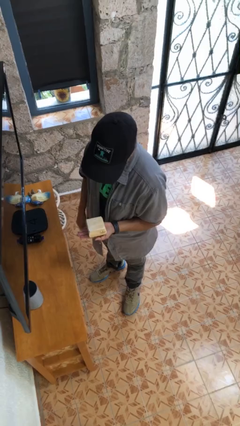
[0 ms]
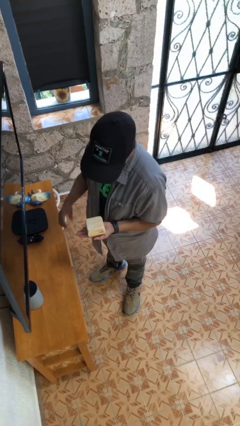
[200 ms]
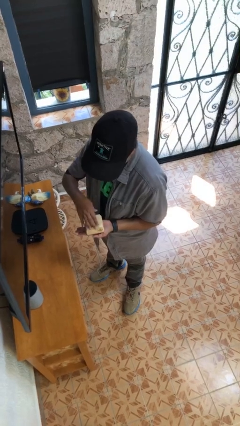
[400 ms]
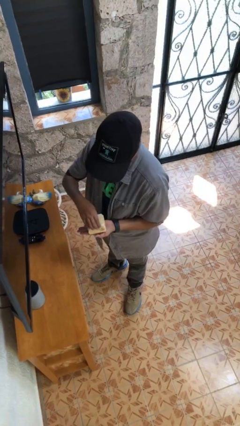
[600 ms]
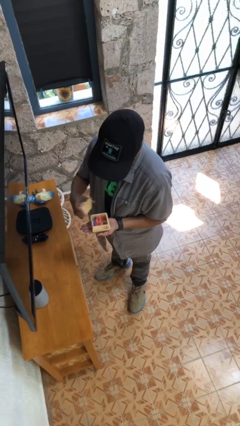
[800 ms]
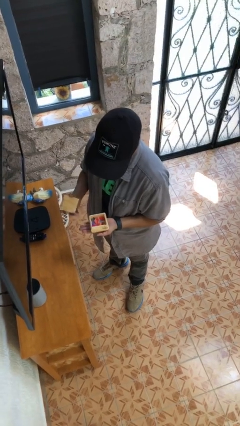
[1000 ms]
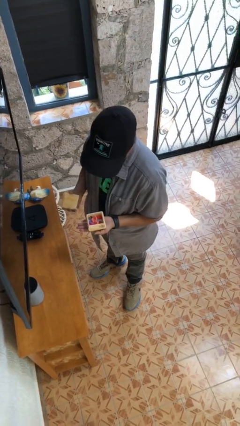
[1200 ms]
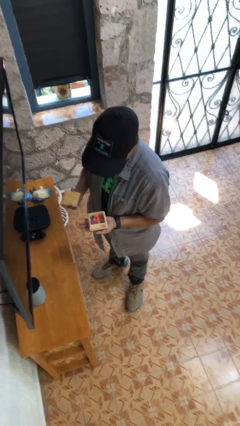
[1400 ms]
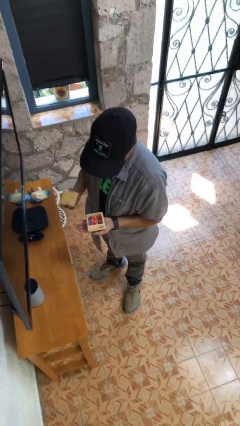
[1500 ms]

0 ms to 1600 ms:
person opens jewelry box

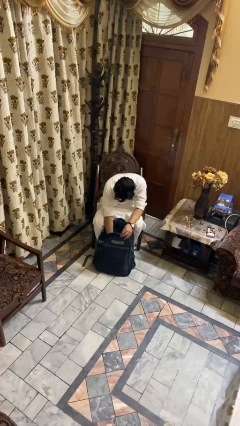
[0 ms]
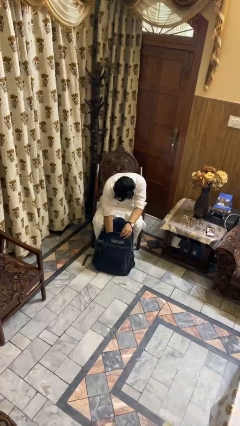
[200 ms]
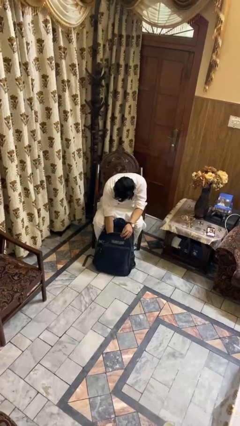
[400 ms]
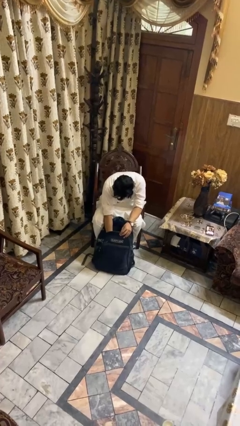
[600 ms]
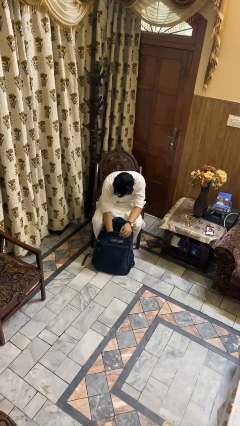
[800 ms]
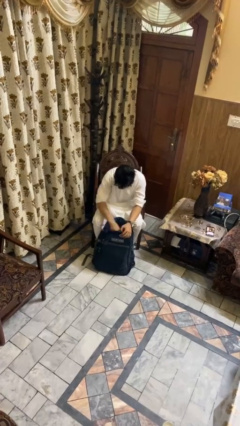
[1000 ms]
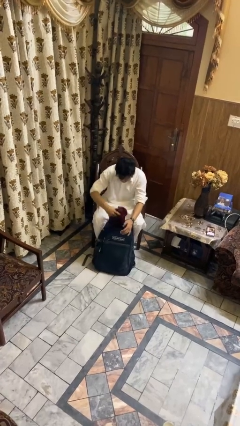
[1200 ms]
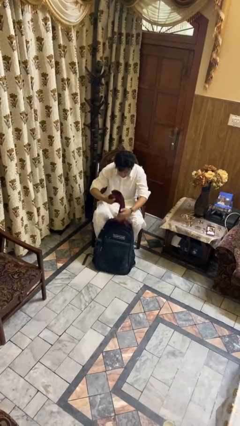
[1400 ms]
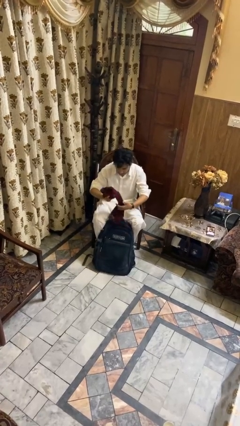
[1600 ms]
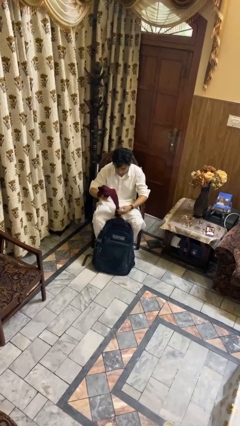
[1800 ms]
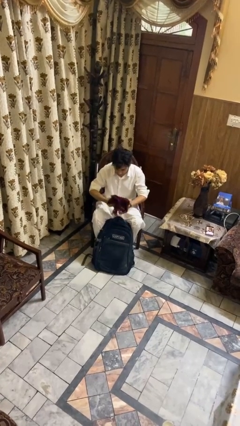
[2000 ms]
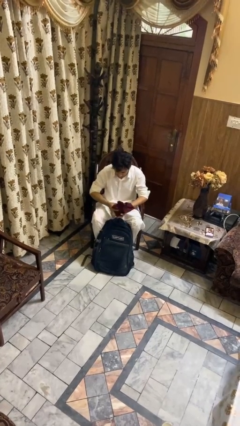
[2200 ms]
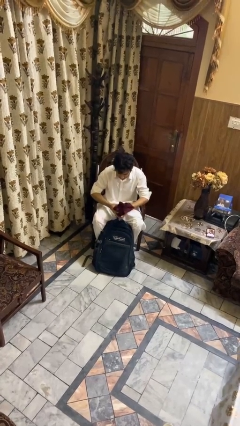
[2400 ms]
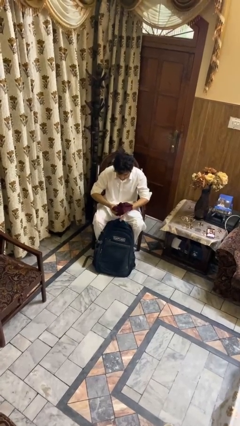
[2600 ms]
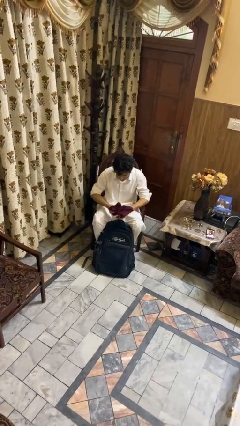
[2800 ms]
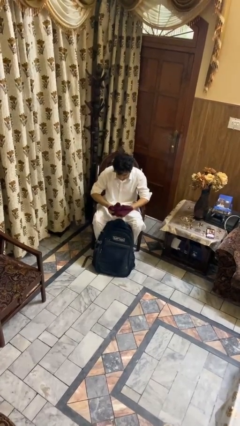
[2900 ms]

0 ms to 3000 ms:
person takes object from backpack

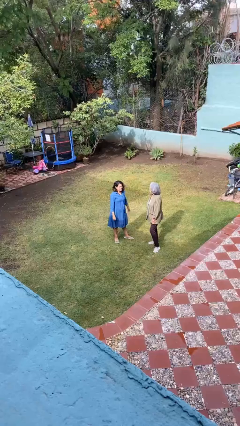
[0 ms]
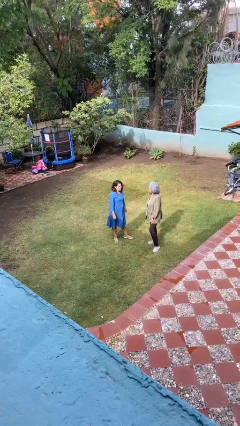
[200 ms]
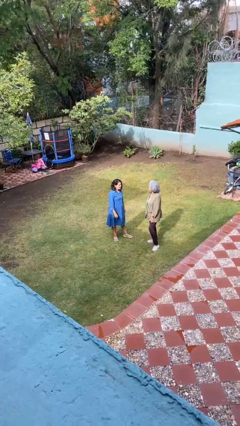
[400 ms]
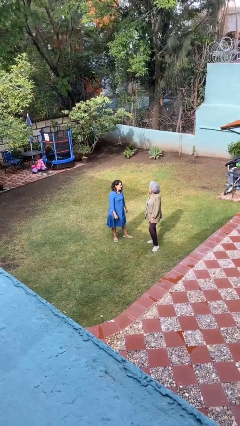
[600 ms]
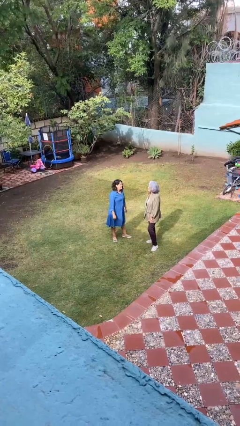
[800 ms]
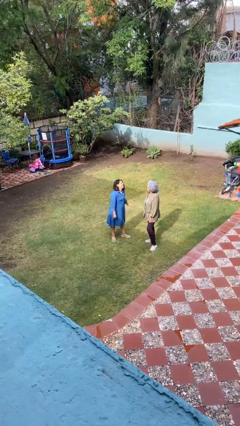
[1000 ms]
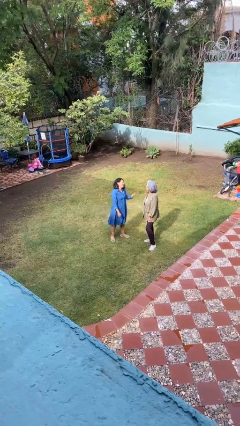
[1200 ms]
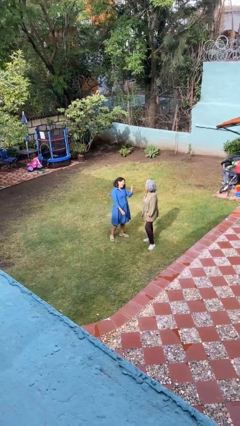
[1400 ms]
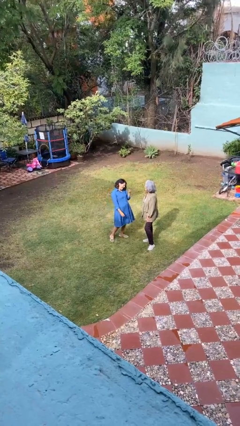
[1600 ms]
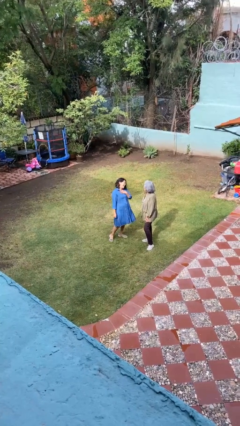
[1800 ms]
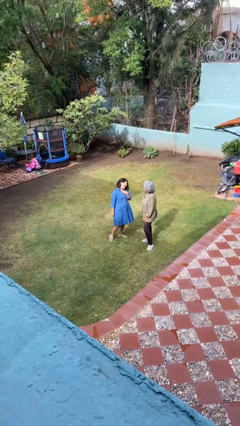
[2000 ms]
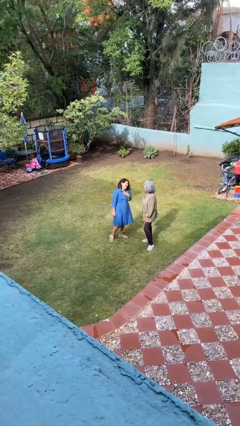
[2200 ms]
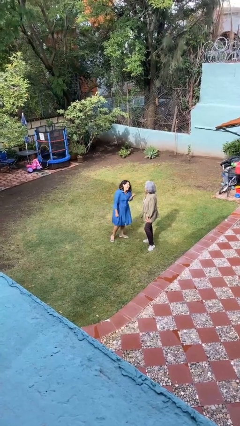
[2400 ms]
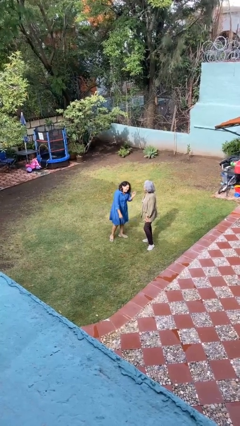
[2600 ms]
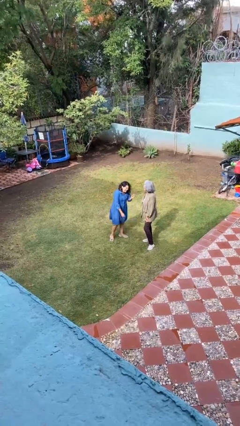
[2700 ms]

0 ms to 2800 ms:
person laughs with person

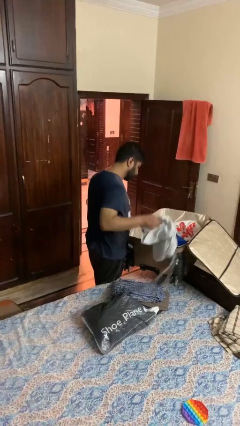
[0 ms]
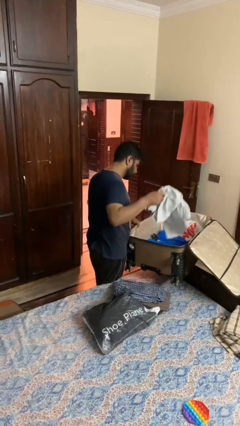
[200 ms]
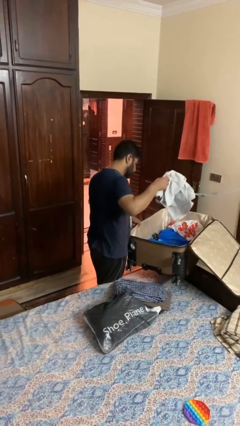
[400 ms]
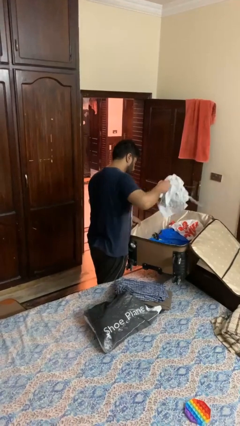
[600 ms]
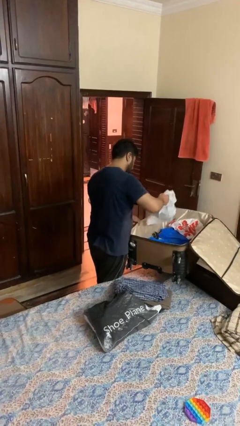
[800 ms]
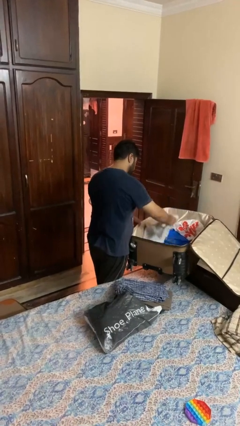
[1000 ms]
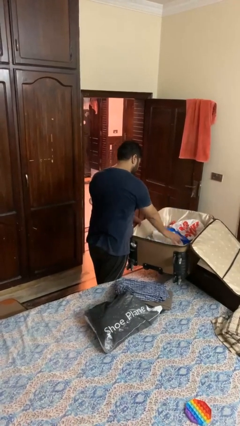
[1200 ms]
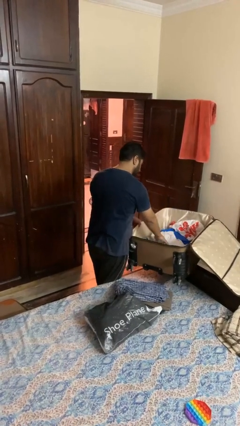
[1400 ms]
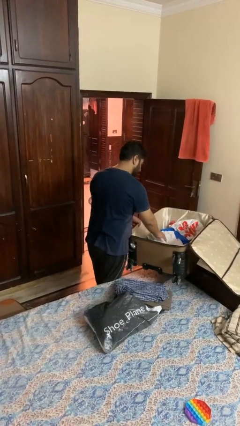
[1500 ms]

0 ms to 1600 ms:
person loads clothes into suitcase

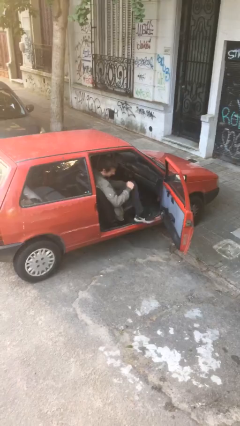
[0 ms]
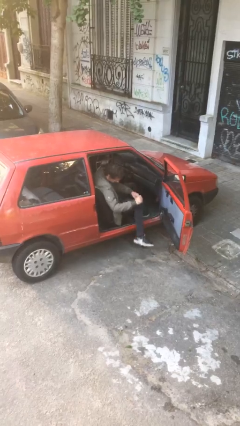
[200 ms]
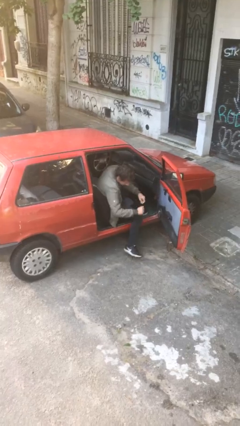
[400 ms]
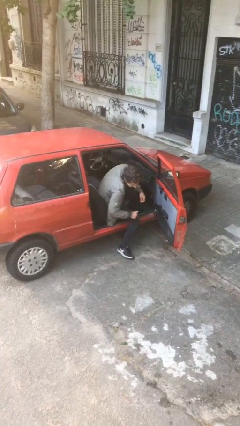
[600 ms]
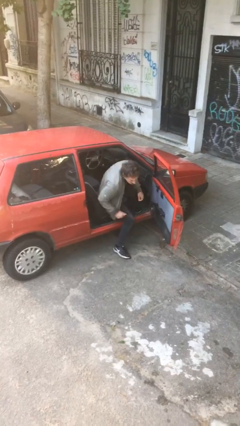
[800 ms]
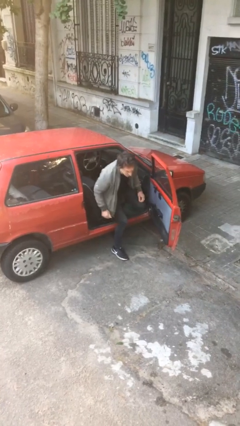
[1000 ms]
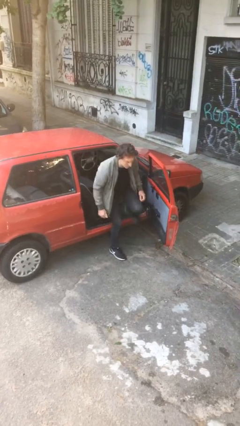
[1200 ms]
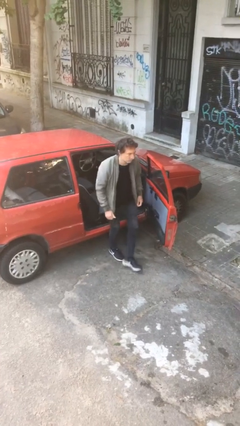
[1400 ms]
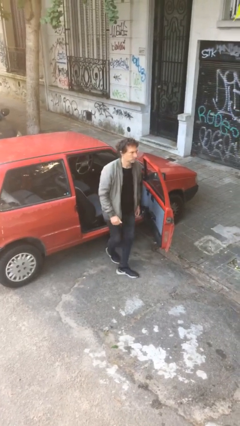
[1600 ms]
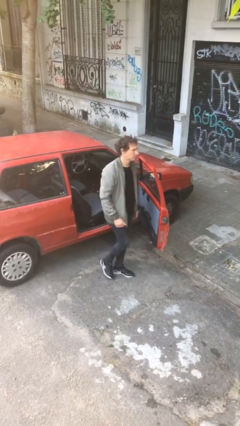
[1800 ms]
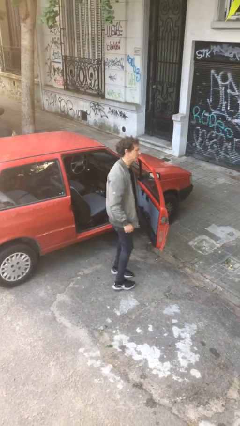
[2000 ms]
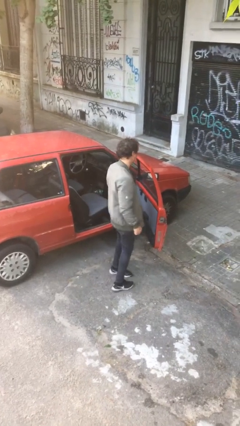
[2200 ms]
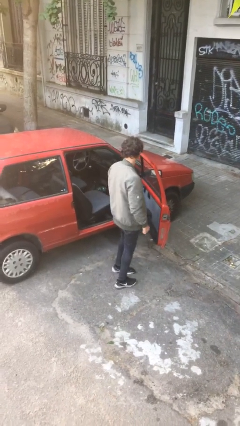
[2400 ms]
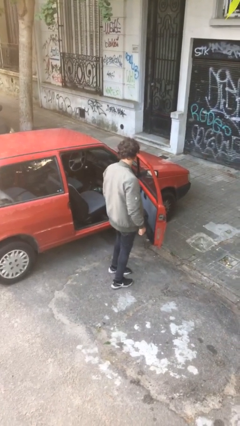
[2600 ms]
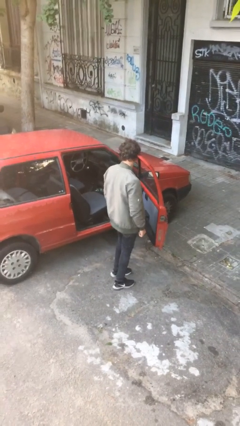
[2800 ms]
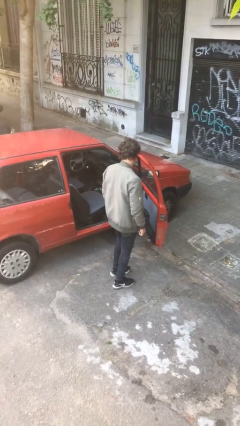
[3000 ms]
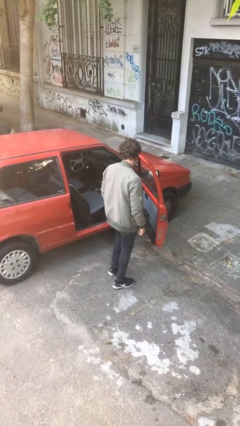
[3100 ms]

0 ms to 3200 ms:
person exits car

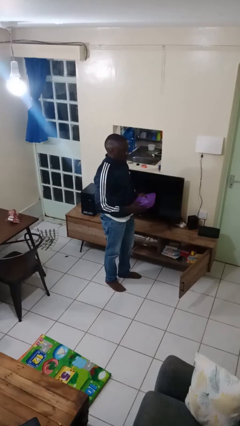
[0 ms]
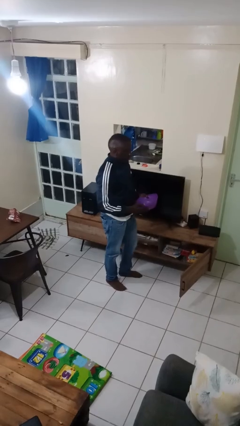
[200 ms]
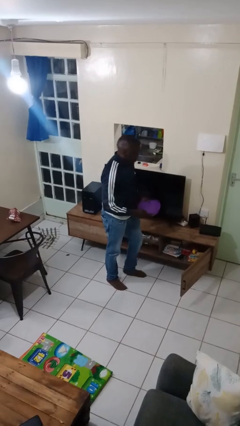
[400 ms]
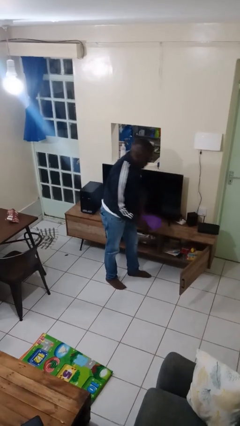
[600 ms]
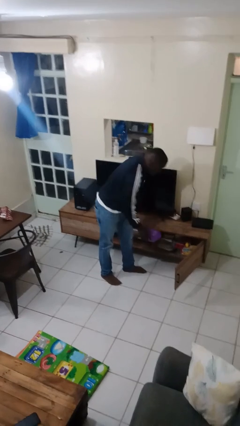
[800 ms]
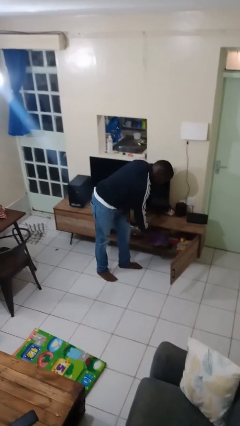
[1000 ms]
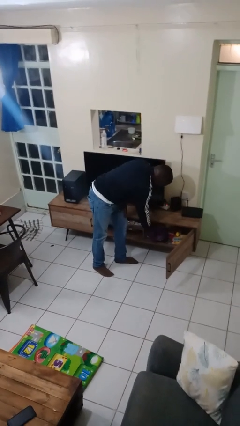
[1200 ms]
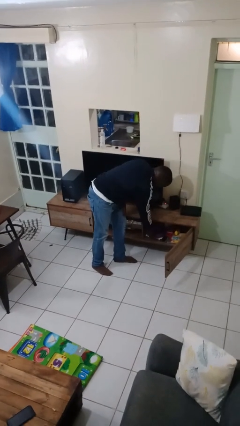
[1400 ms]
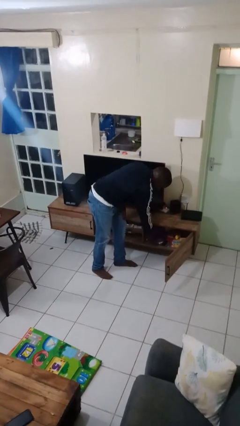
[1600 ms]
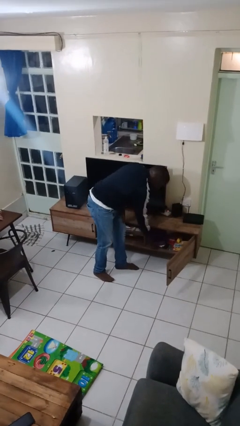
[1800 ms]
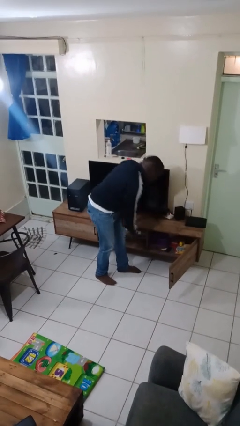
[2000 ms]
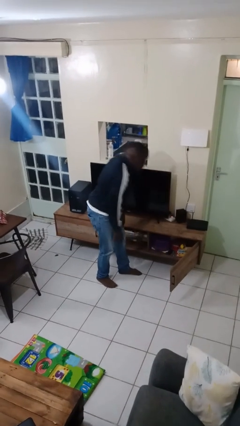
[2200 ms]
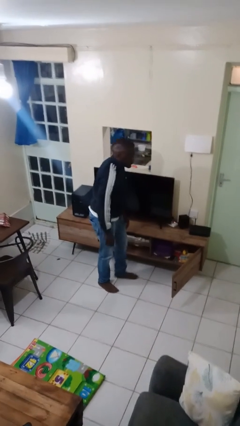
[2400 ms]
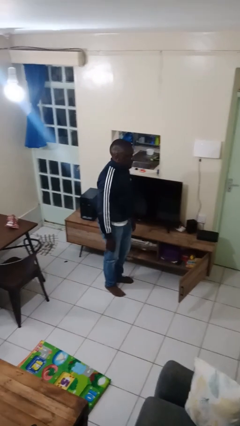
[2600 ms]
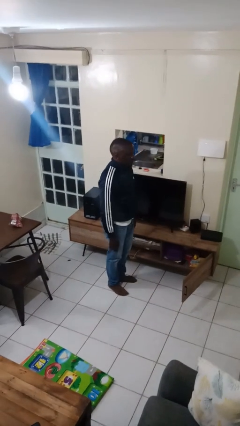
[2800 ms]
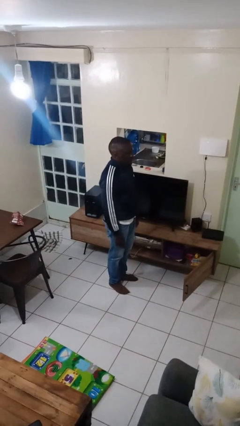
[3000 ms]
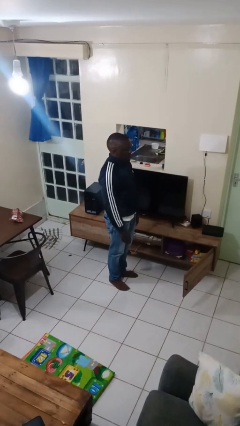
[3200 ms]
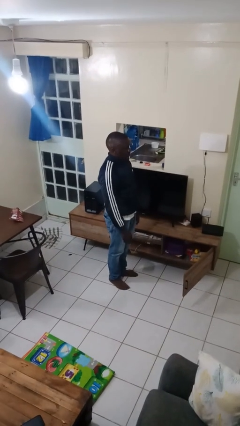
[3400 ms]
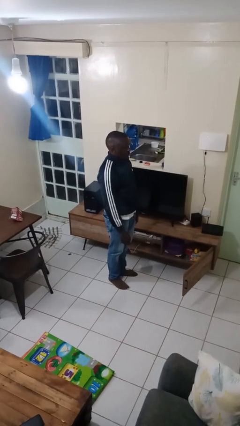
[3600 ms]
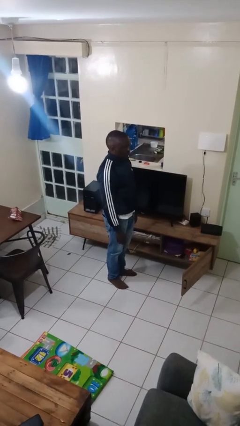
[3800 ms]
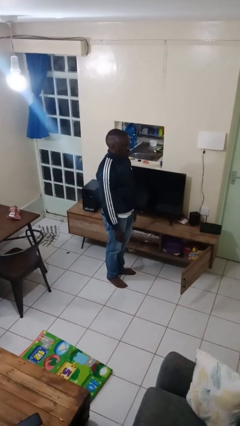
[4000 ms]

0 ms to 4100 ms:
person puts down object into cabinet

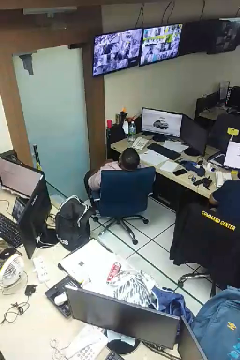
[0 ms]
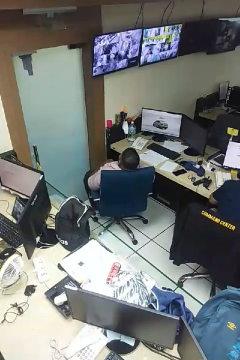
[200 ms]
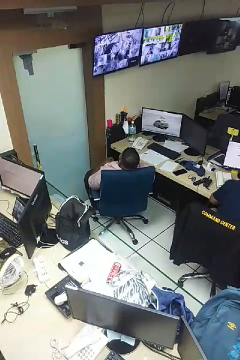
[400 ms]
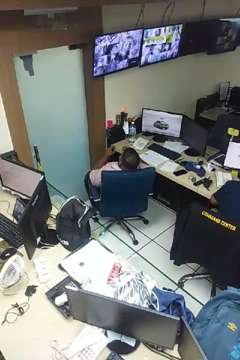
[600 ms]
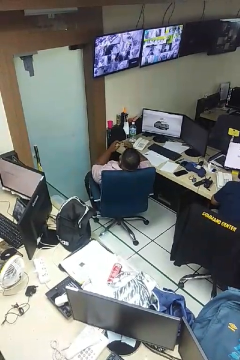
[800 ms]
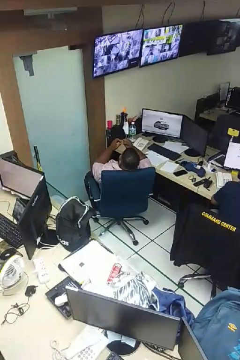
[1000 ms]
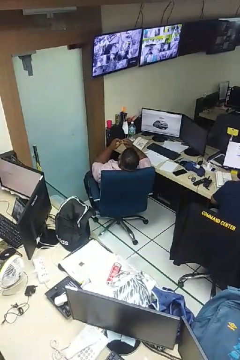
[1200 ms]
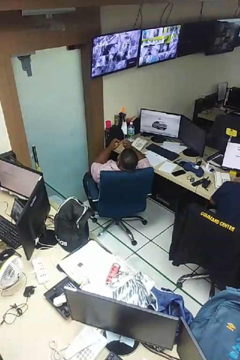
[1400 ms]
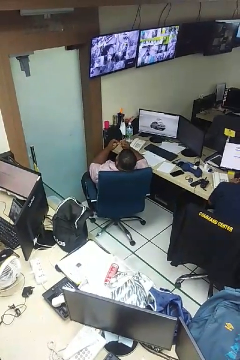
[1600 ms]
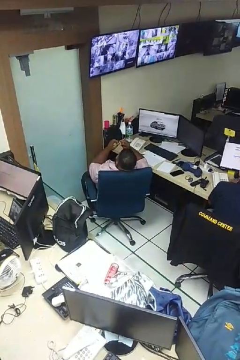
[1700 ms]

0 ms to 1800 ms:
person files fingernails
